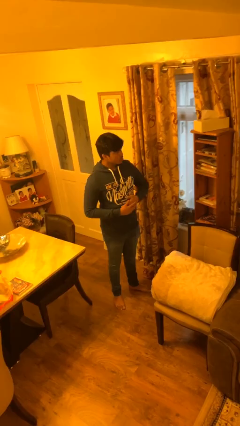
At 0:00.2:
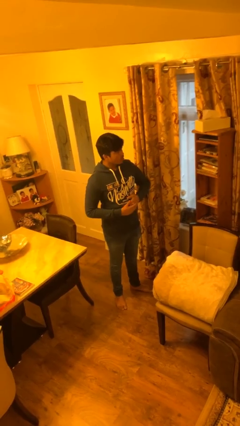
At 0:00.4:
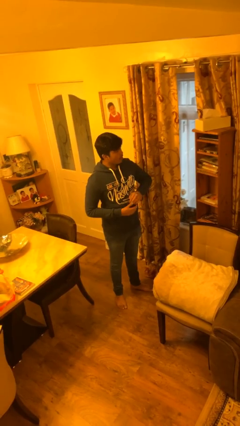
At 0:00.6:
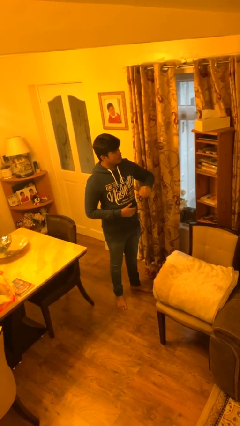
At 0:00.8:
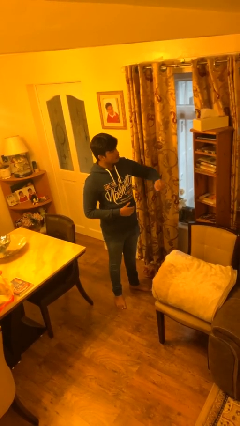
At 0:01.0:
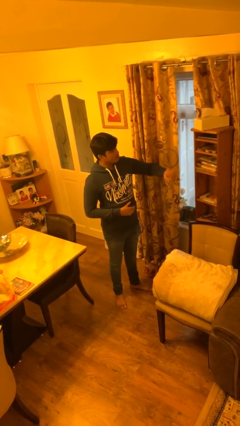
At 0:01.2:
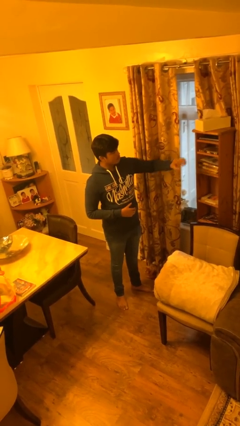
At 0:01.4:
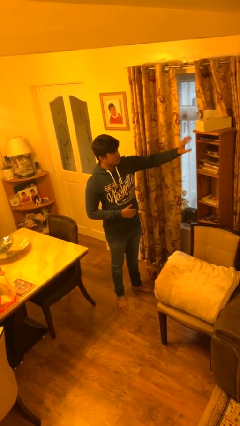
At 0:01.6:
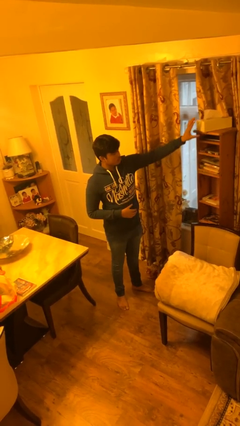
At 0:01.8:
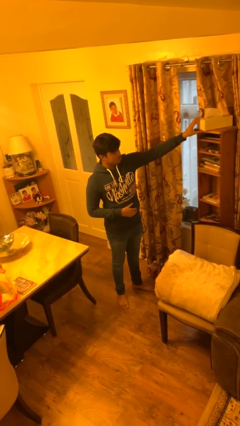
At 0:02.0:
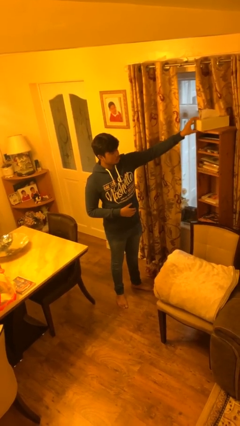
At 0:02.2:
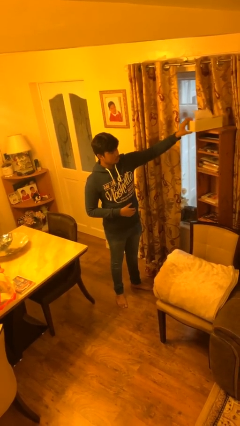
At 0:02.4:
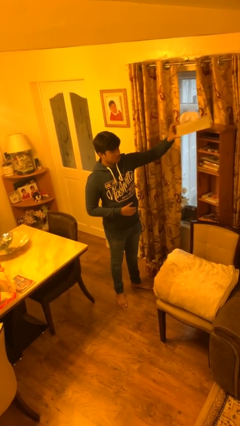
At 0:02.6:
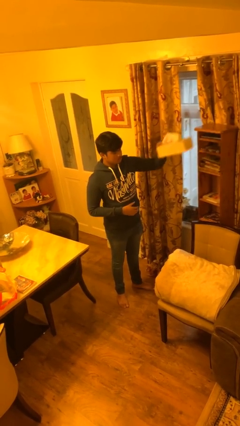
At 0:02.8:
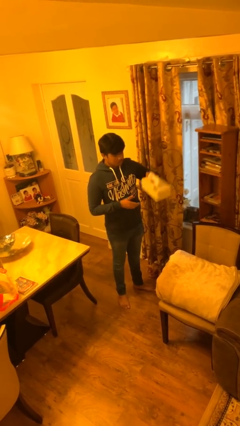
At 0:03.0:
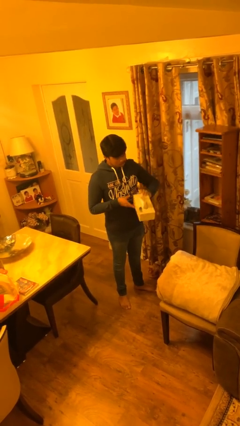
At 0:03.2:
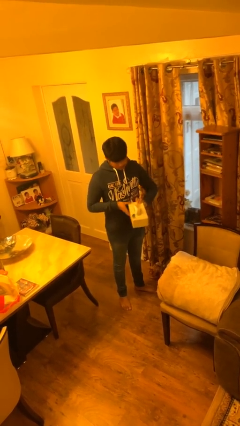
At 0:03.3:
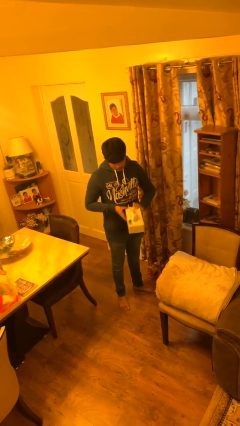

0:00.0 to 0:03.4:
person picks up object from shelf

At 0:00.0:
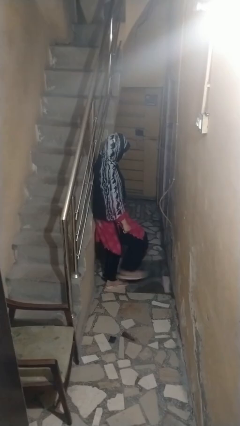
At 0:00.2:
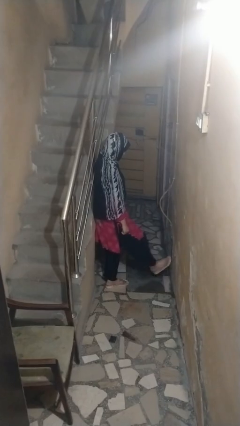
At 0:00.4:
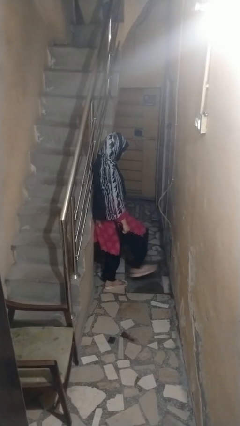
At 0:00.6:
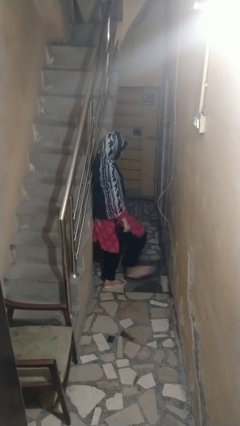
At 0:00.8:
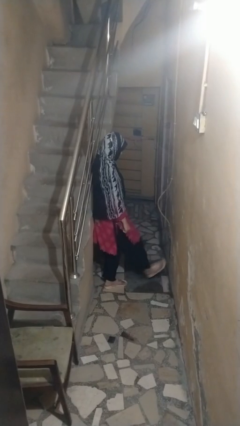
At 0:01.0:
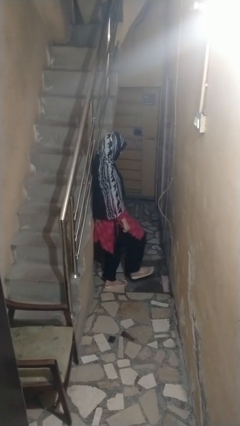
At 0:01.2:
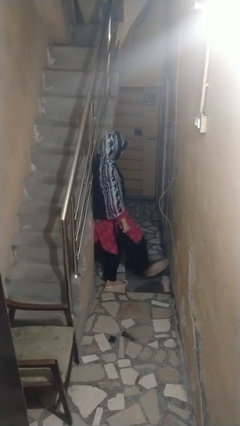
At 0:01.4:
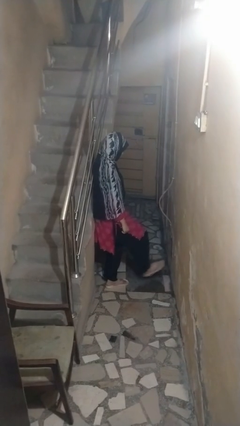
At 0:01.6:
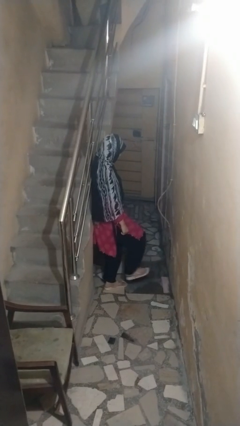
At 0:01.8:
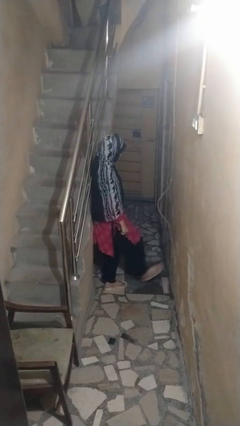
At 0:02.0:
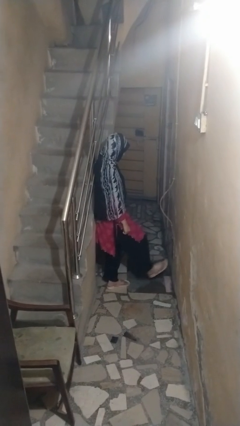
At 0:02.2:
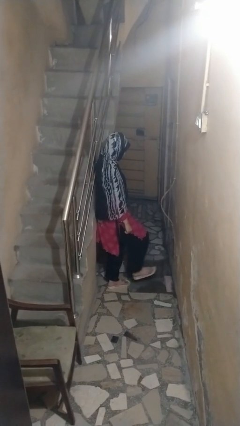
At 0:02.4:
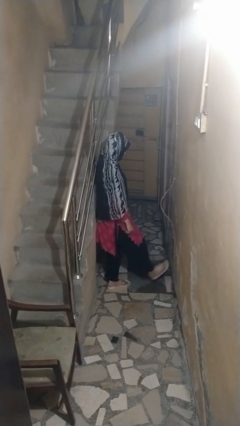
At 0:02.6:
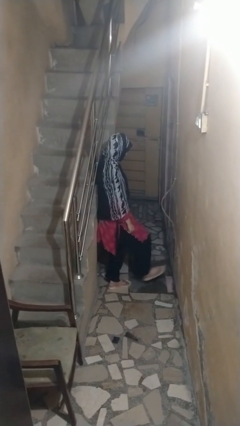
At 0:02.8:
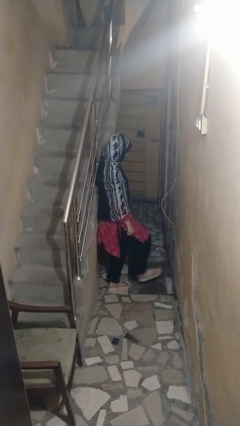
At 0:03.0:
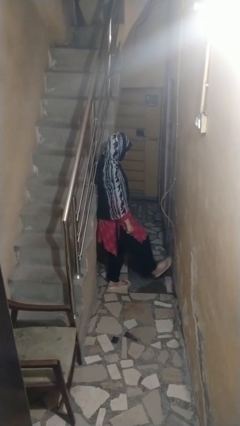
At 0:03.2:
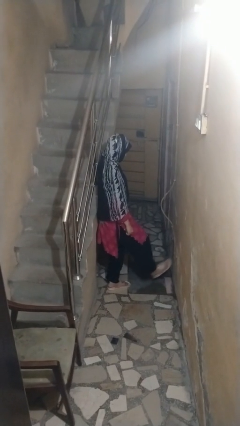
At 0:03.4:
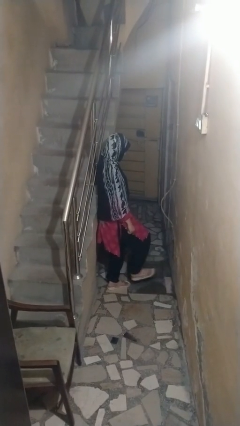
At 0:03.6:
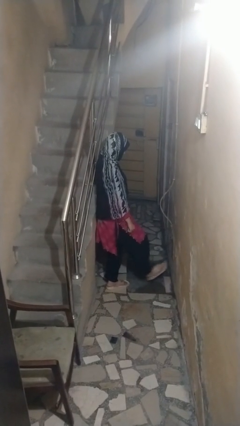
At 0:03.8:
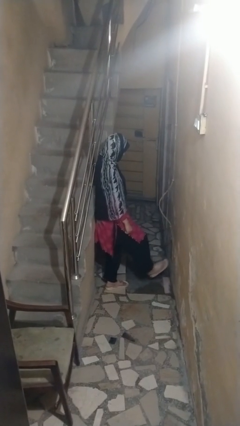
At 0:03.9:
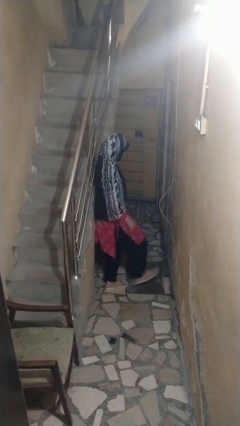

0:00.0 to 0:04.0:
person karate kicks

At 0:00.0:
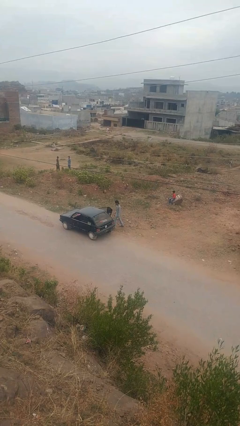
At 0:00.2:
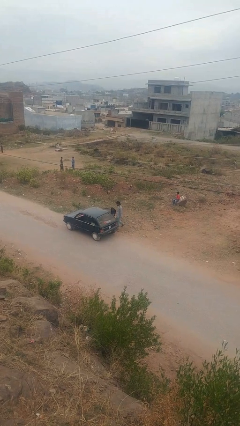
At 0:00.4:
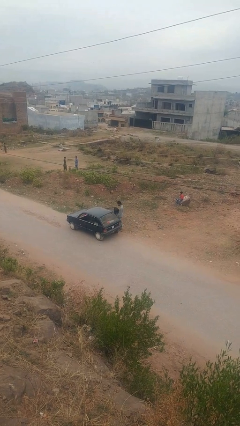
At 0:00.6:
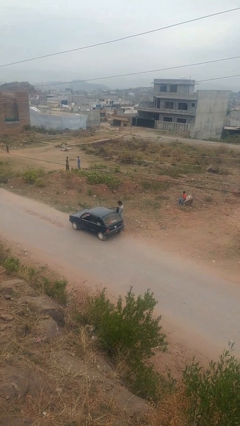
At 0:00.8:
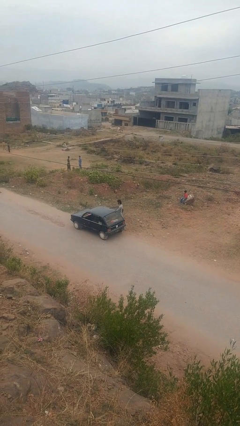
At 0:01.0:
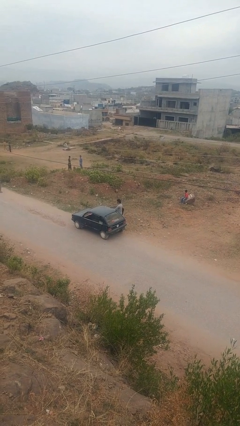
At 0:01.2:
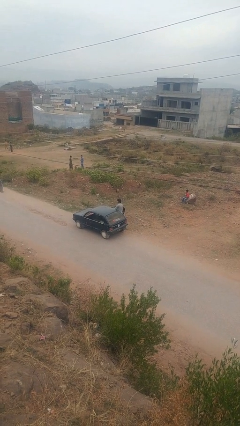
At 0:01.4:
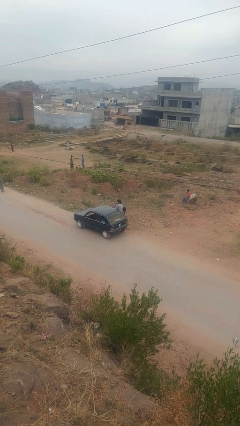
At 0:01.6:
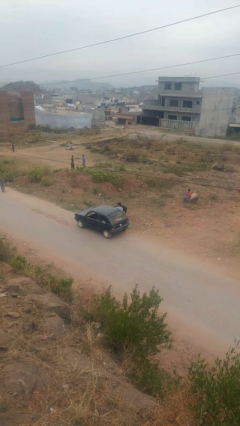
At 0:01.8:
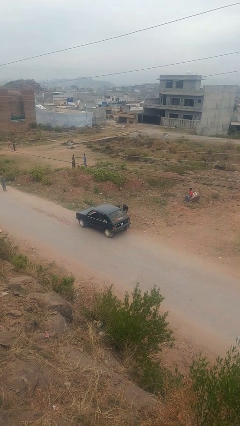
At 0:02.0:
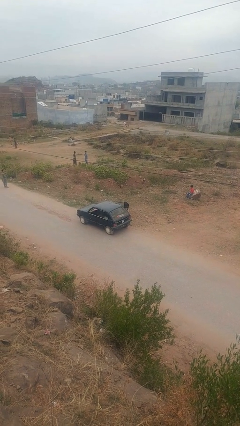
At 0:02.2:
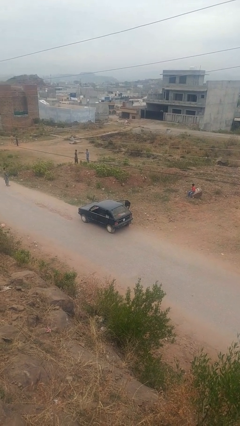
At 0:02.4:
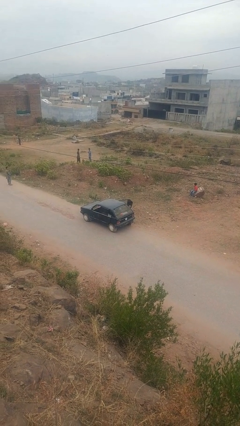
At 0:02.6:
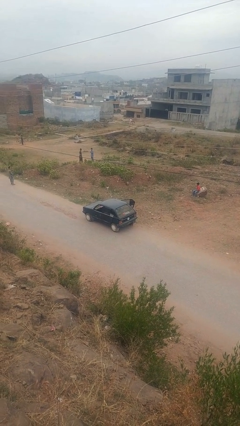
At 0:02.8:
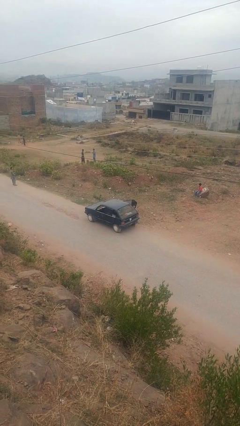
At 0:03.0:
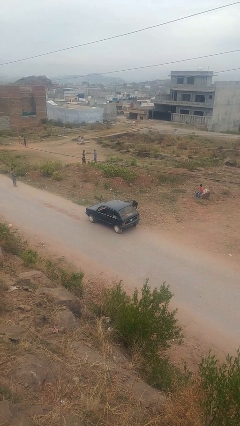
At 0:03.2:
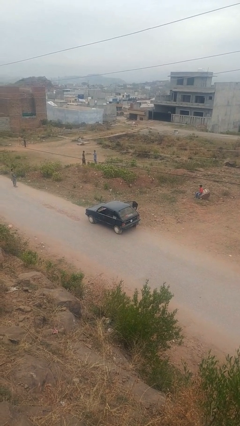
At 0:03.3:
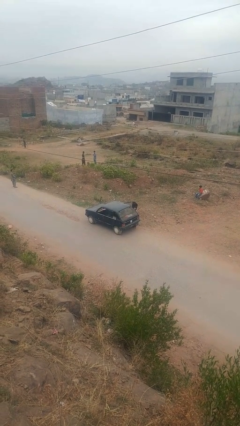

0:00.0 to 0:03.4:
person enters car

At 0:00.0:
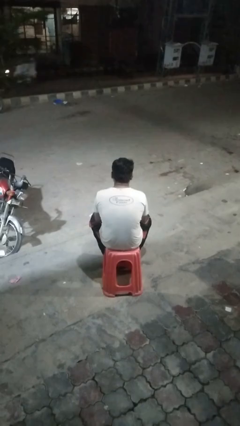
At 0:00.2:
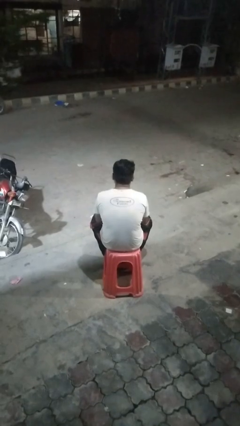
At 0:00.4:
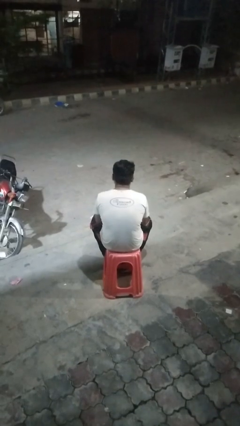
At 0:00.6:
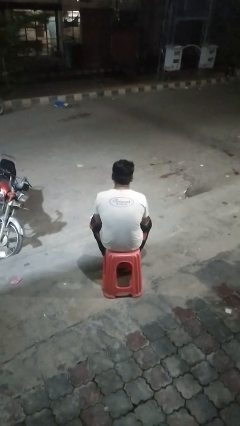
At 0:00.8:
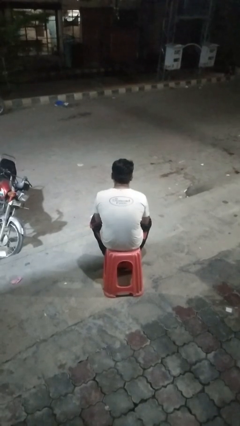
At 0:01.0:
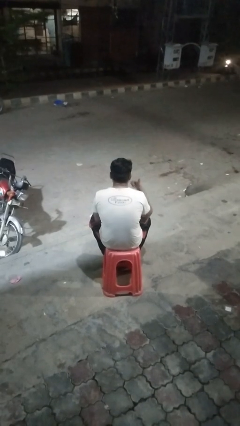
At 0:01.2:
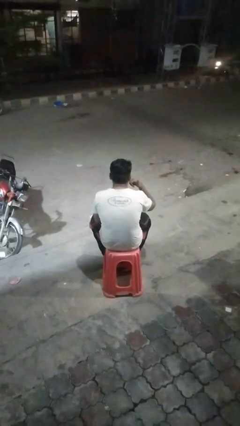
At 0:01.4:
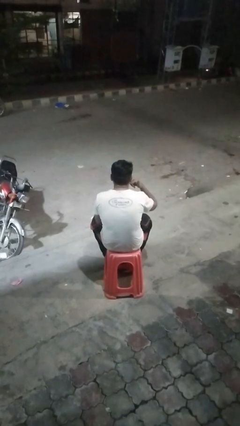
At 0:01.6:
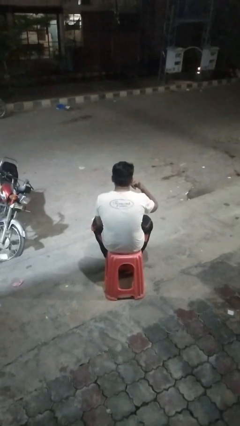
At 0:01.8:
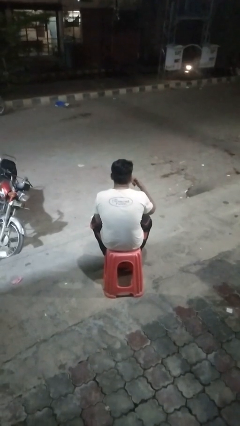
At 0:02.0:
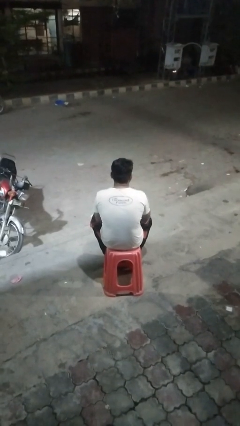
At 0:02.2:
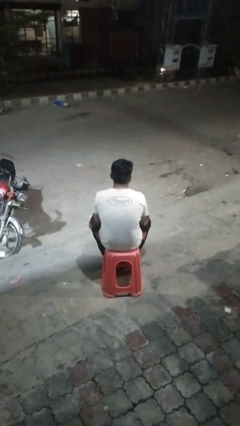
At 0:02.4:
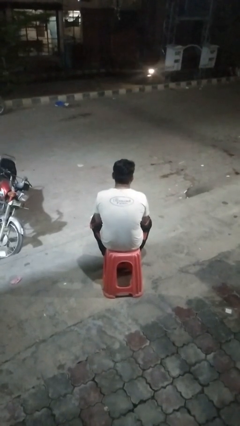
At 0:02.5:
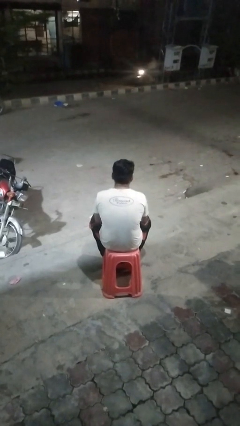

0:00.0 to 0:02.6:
person gestures call me

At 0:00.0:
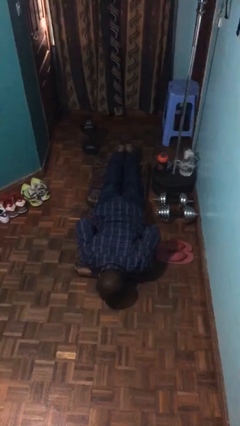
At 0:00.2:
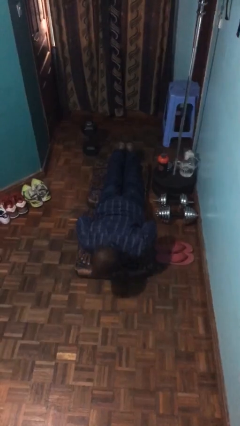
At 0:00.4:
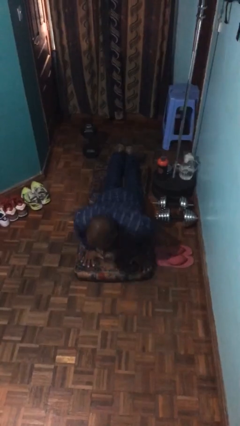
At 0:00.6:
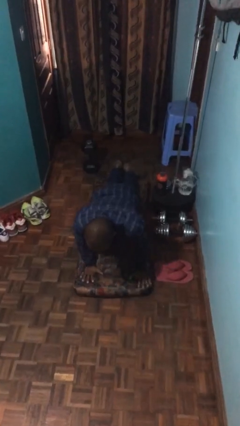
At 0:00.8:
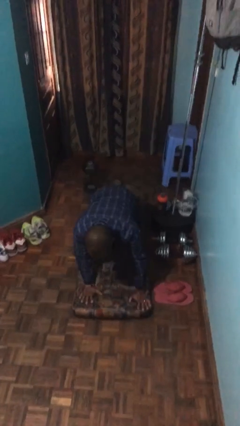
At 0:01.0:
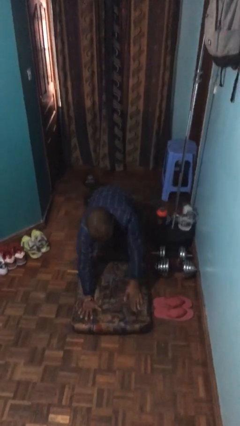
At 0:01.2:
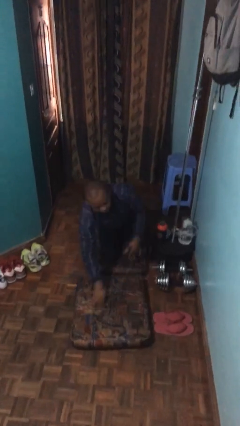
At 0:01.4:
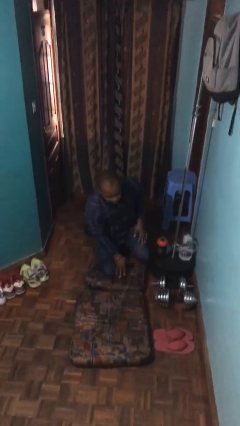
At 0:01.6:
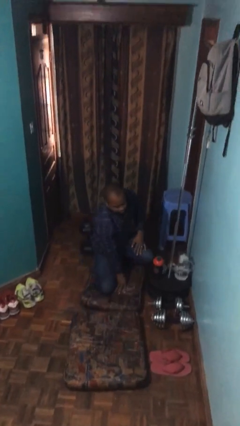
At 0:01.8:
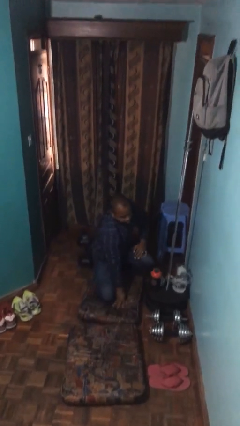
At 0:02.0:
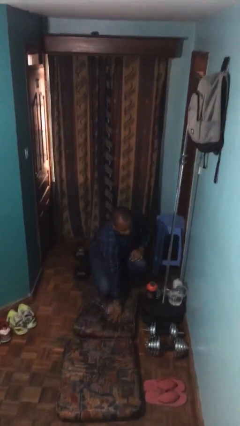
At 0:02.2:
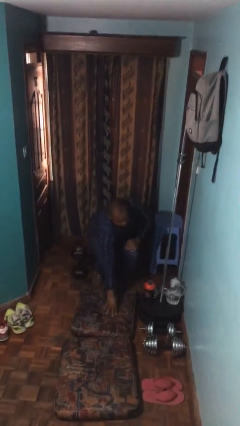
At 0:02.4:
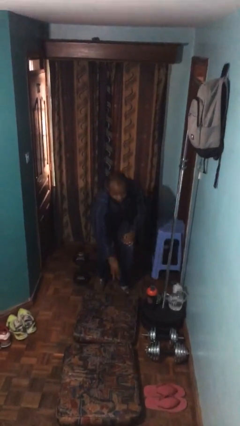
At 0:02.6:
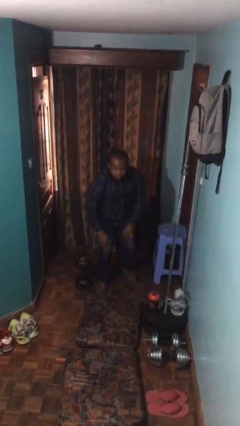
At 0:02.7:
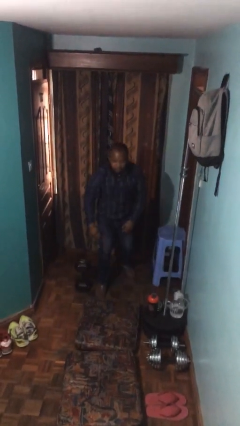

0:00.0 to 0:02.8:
person stands up from floor

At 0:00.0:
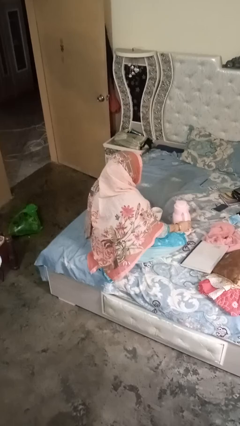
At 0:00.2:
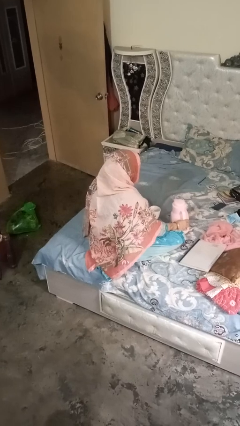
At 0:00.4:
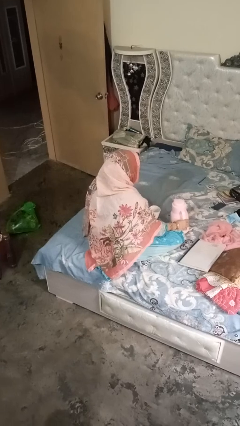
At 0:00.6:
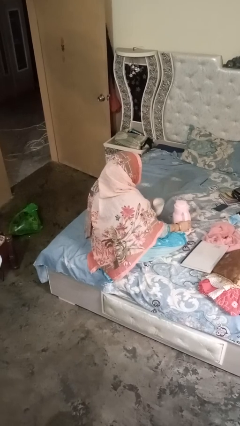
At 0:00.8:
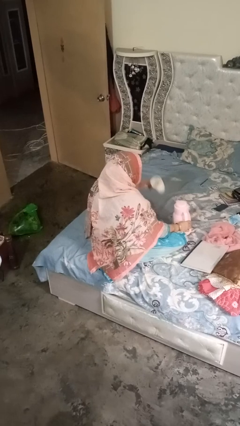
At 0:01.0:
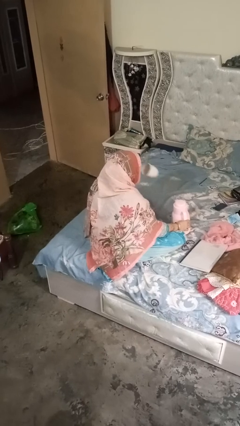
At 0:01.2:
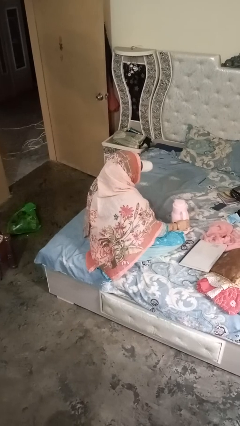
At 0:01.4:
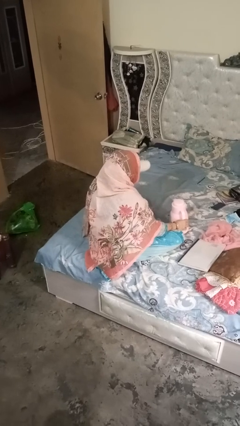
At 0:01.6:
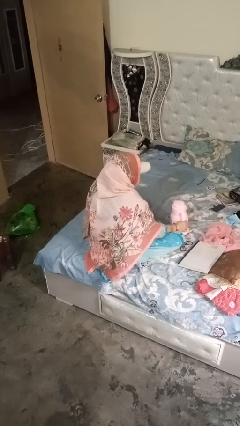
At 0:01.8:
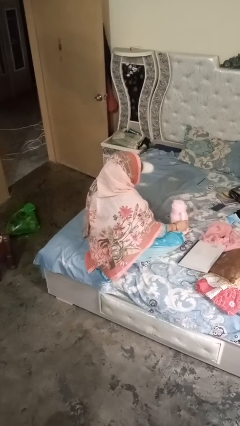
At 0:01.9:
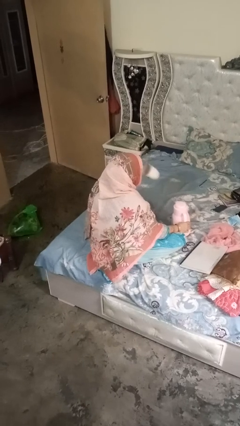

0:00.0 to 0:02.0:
person pours coffee into mug
